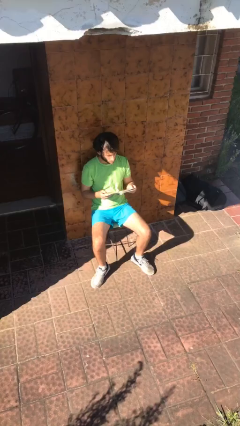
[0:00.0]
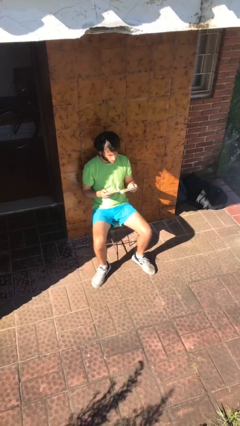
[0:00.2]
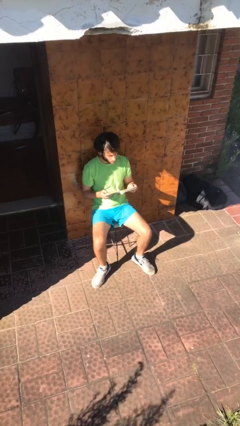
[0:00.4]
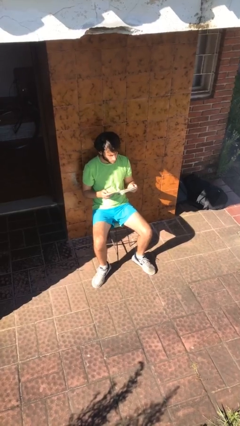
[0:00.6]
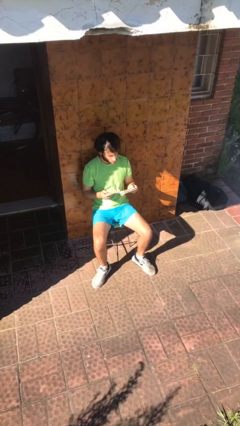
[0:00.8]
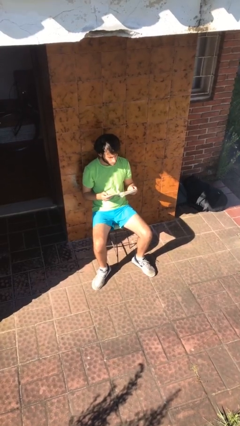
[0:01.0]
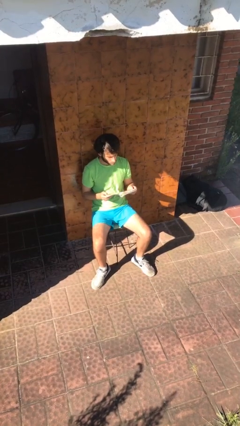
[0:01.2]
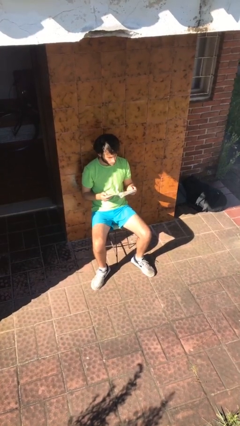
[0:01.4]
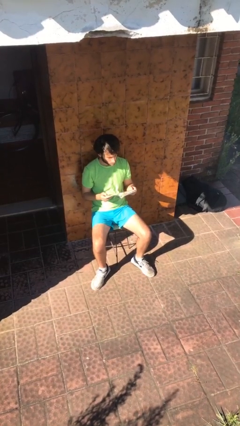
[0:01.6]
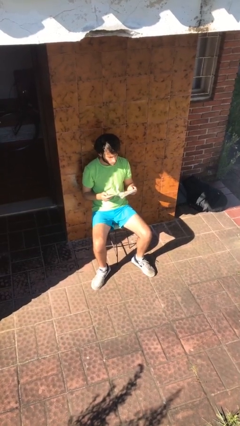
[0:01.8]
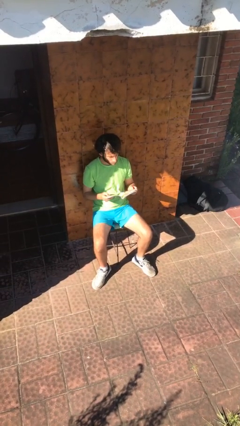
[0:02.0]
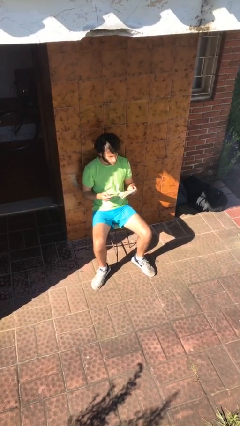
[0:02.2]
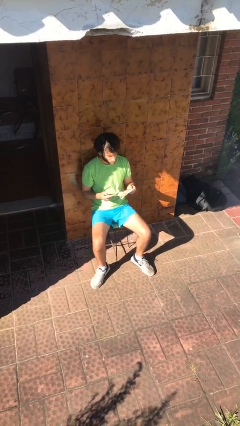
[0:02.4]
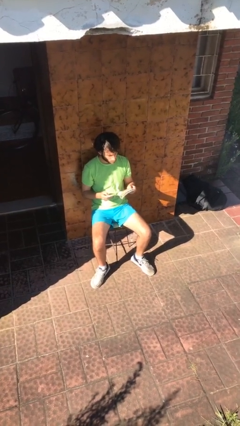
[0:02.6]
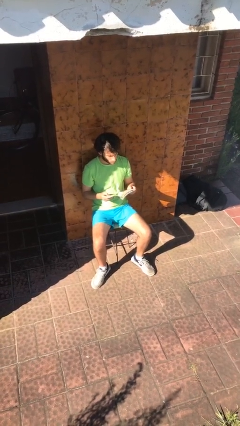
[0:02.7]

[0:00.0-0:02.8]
person reads document

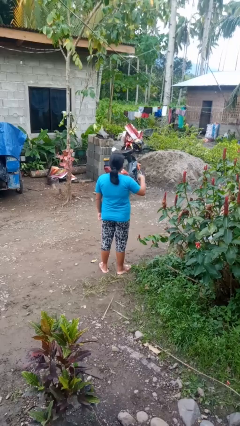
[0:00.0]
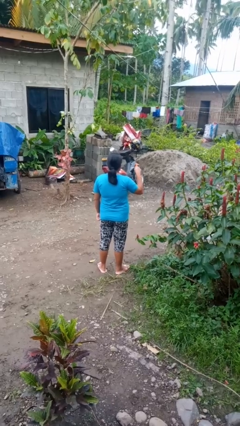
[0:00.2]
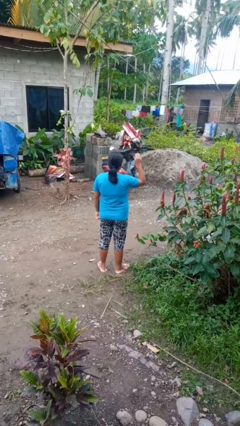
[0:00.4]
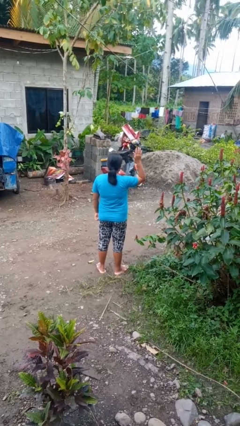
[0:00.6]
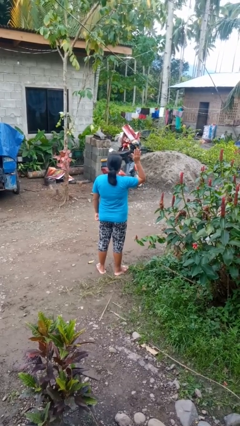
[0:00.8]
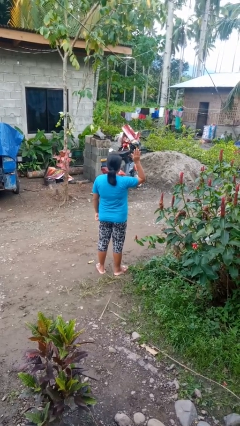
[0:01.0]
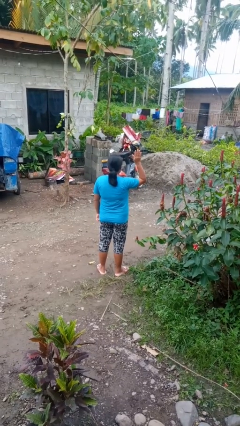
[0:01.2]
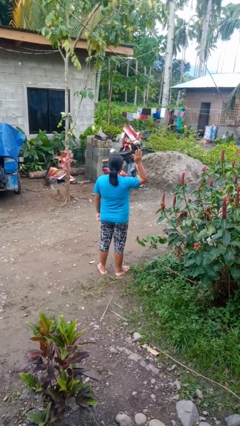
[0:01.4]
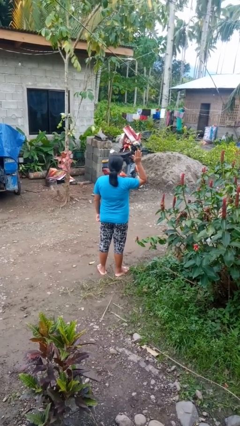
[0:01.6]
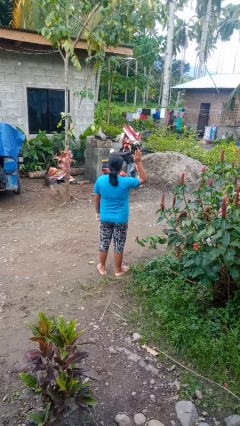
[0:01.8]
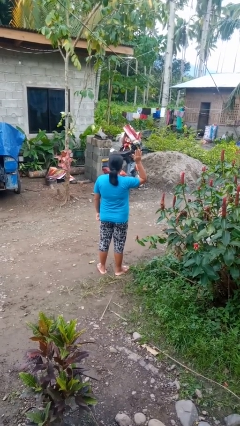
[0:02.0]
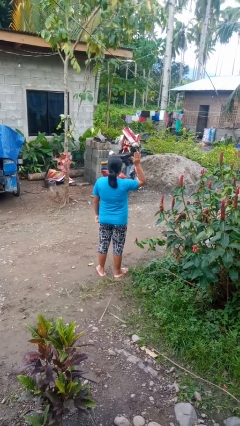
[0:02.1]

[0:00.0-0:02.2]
person gestures raise hand

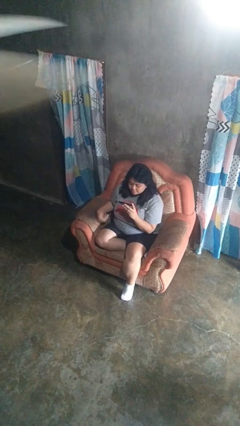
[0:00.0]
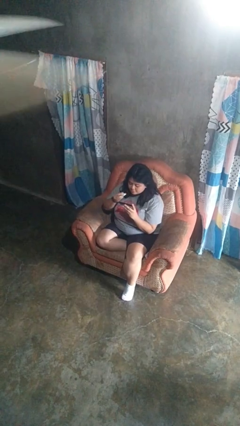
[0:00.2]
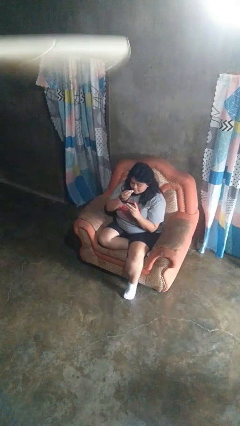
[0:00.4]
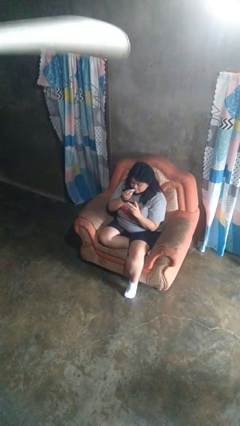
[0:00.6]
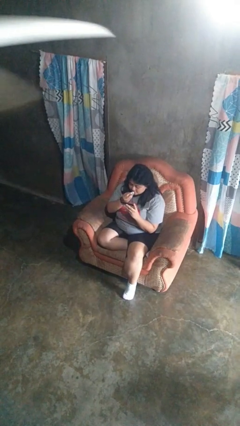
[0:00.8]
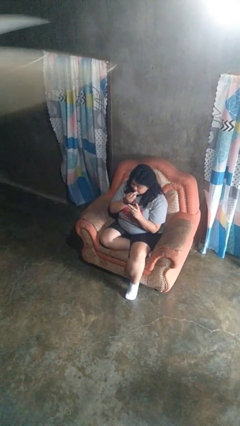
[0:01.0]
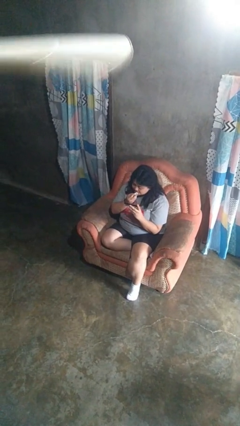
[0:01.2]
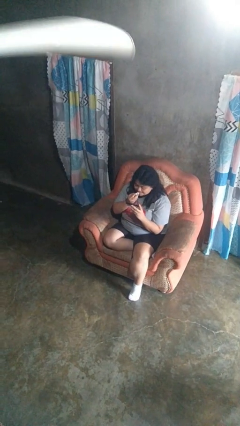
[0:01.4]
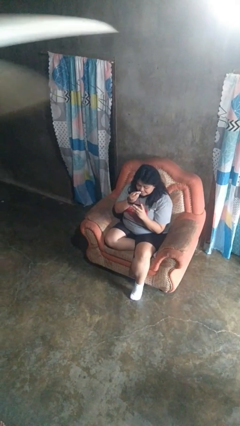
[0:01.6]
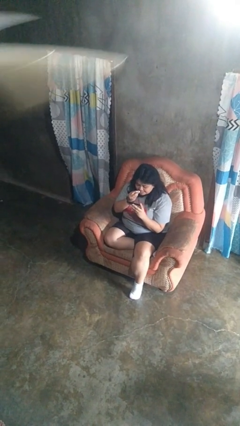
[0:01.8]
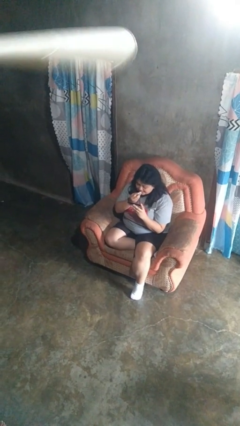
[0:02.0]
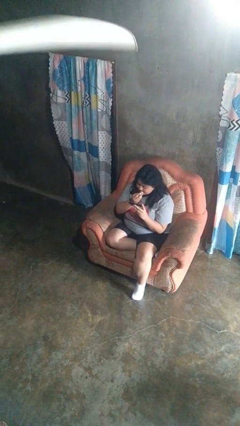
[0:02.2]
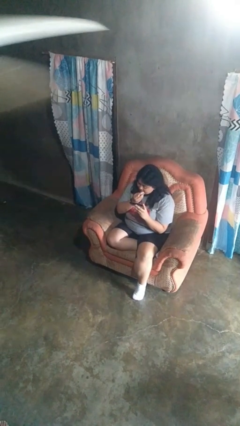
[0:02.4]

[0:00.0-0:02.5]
person applies lip makeup

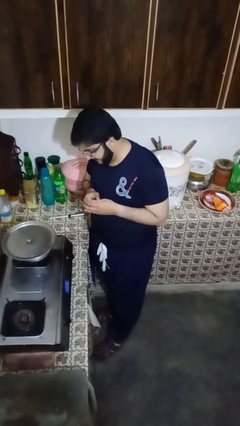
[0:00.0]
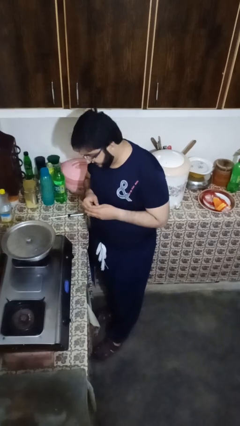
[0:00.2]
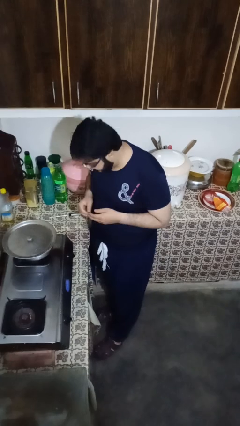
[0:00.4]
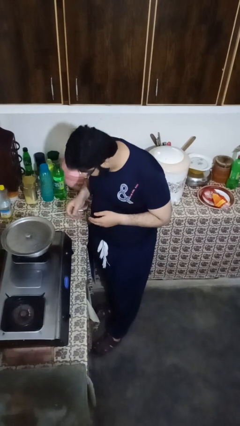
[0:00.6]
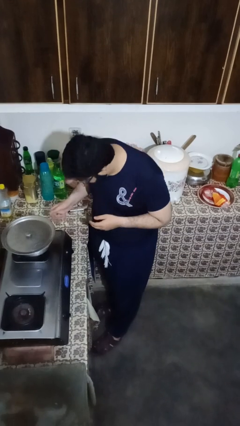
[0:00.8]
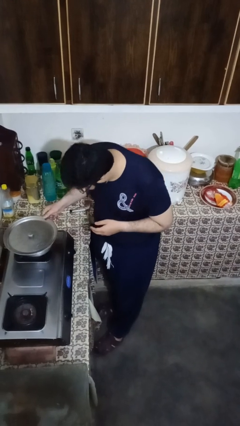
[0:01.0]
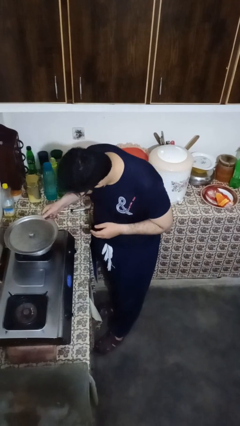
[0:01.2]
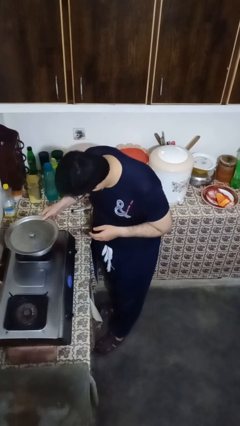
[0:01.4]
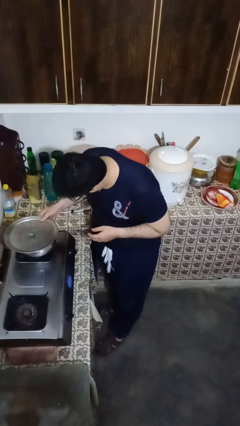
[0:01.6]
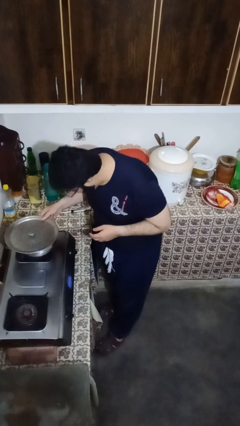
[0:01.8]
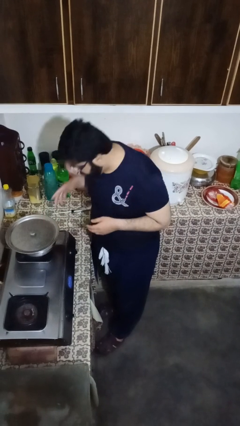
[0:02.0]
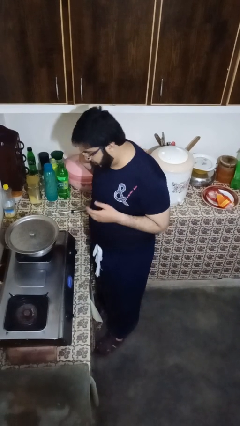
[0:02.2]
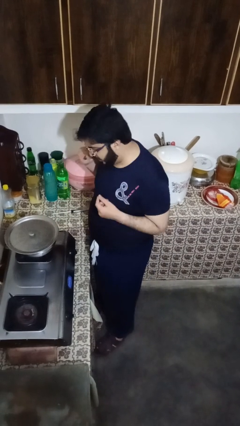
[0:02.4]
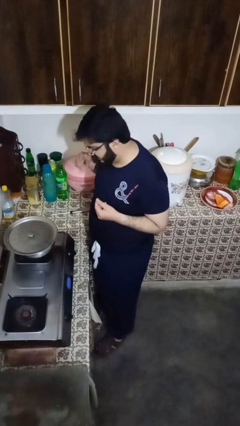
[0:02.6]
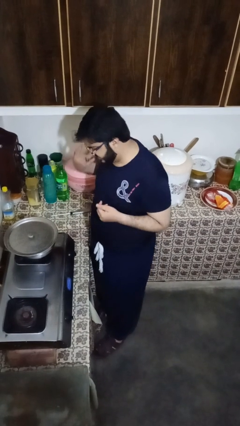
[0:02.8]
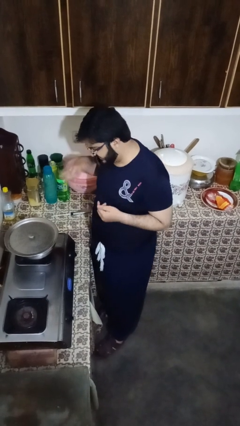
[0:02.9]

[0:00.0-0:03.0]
person burns hand

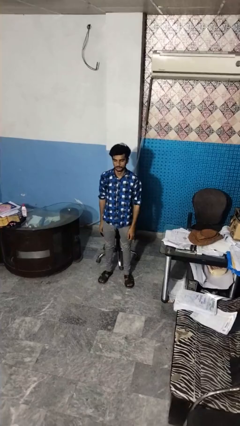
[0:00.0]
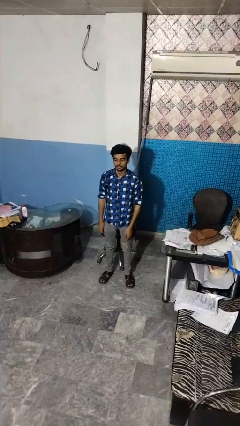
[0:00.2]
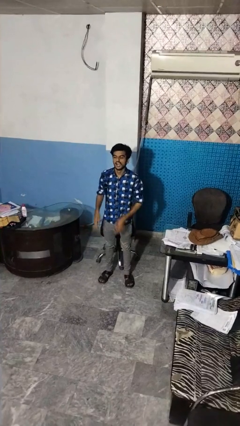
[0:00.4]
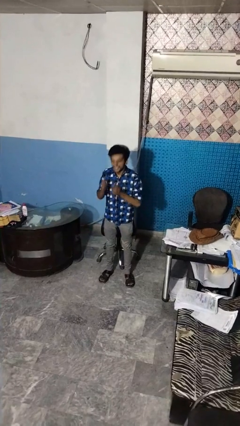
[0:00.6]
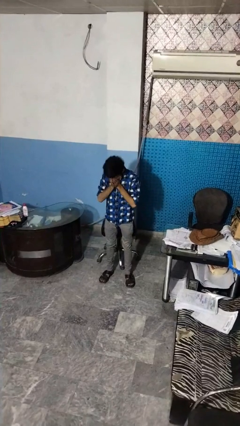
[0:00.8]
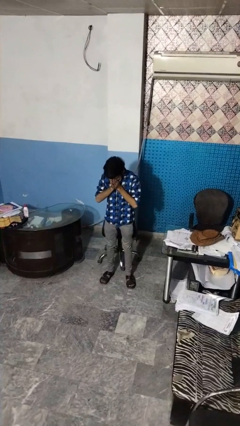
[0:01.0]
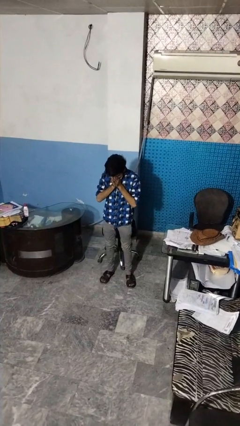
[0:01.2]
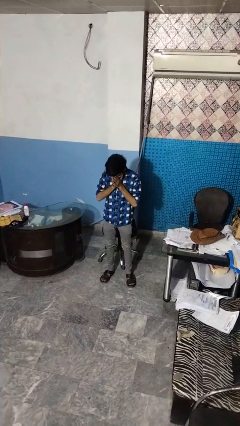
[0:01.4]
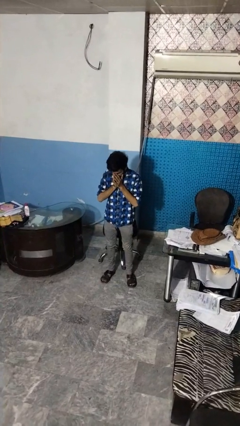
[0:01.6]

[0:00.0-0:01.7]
person sneezes into hand

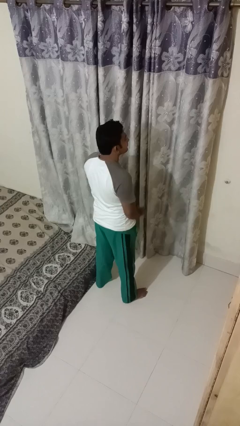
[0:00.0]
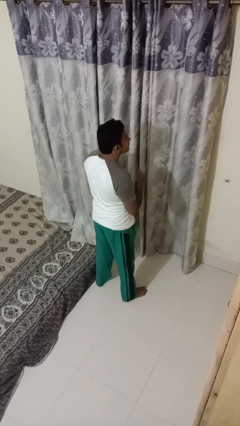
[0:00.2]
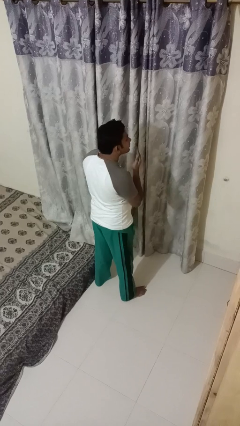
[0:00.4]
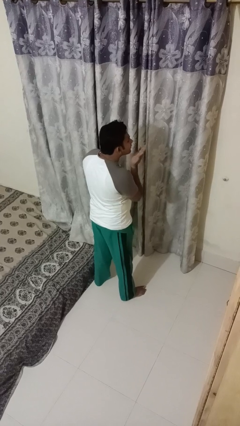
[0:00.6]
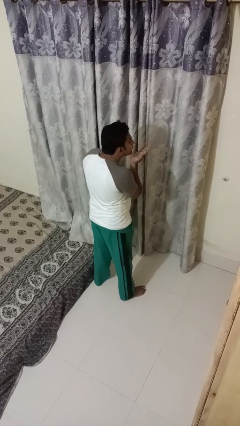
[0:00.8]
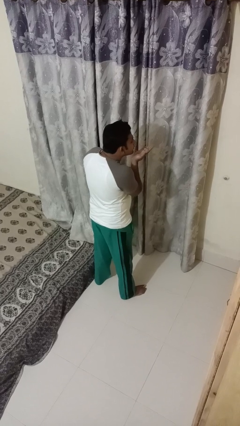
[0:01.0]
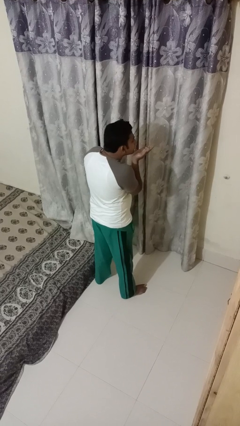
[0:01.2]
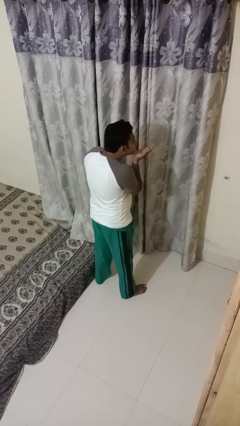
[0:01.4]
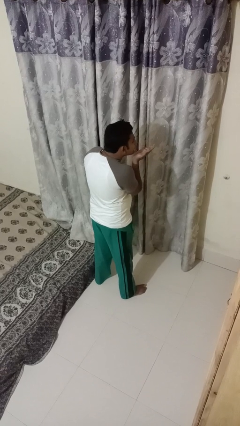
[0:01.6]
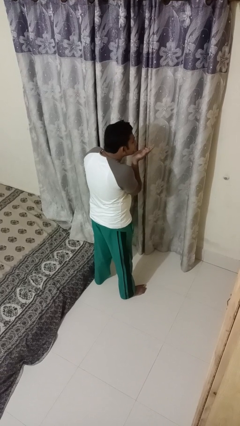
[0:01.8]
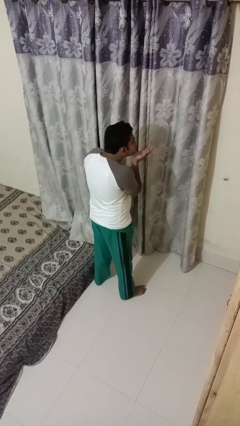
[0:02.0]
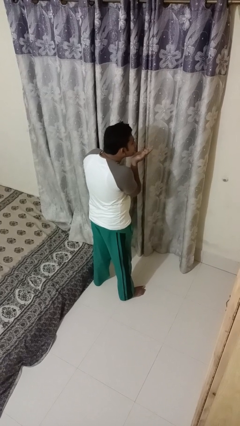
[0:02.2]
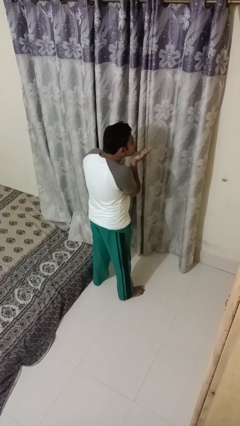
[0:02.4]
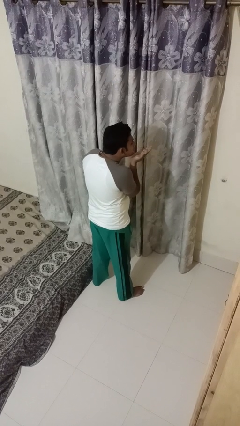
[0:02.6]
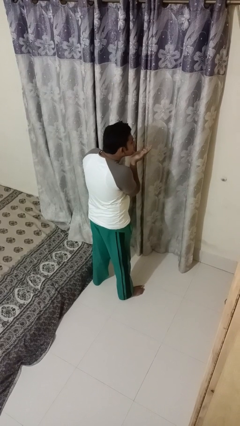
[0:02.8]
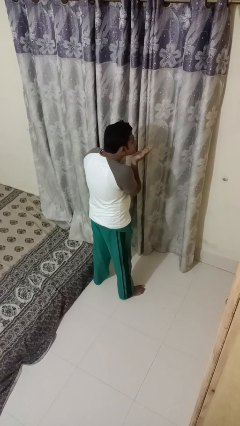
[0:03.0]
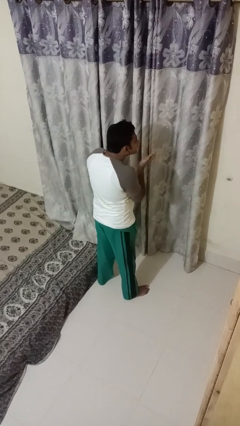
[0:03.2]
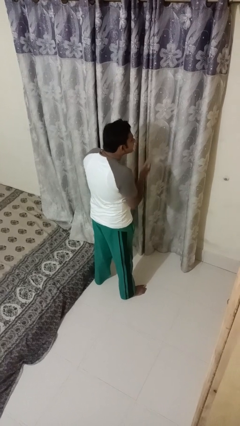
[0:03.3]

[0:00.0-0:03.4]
person gestures blow kiss

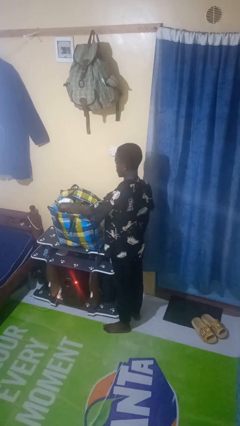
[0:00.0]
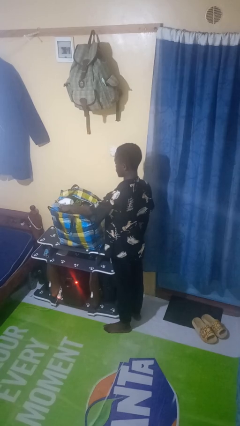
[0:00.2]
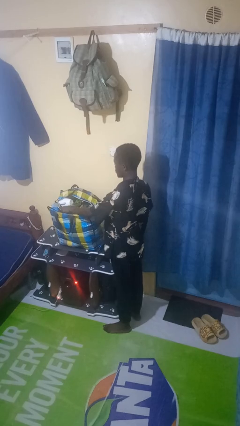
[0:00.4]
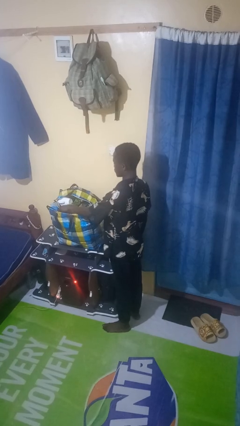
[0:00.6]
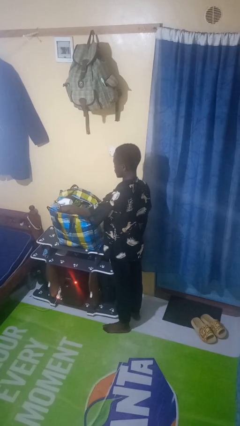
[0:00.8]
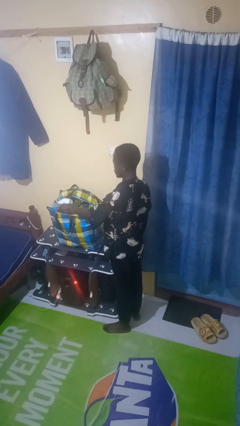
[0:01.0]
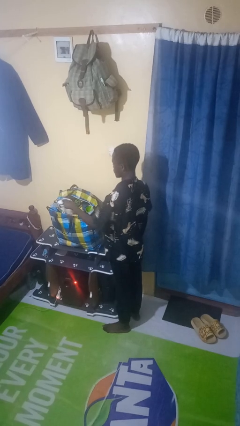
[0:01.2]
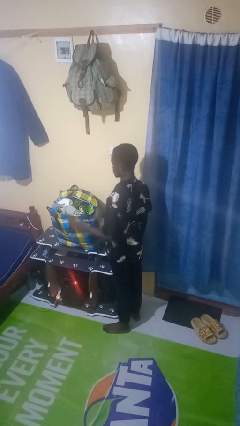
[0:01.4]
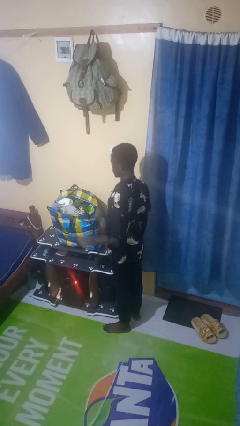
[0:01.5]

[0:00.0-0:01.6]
person puts object into bag
